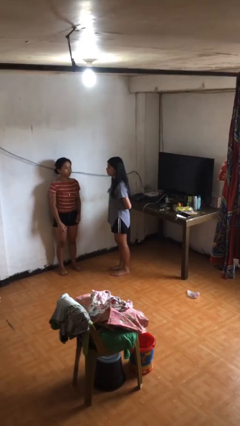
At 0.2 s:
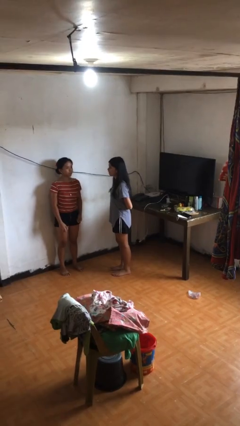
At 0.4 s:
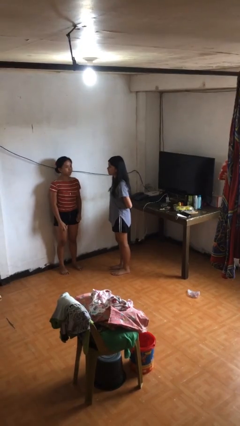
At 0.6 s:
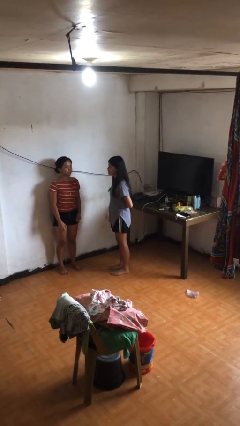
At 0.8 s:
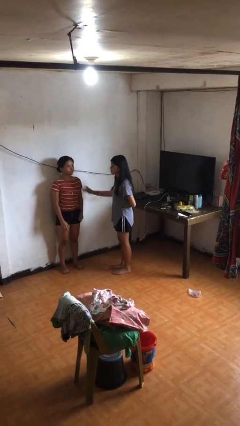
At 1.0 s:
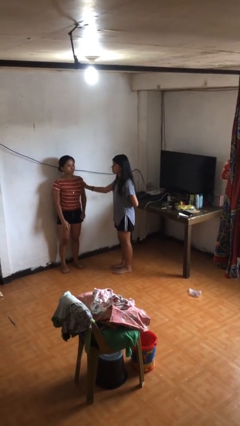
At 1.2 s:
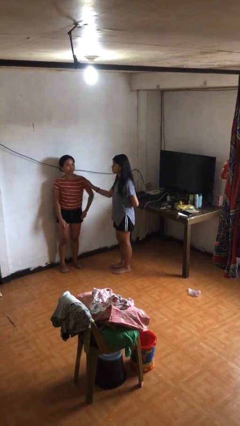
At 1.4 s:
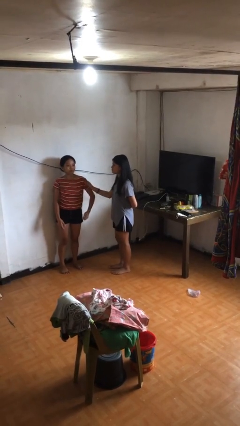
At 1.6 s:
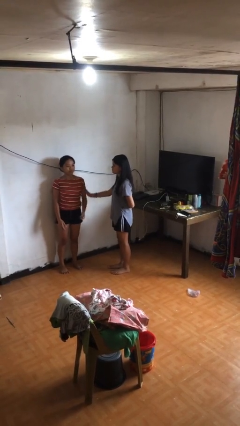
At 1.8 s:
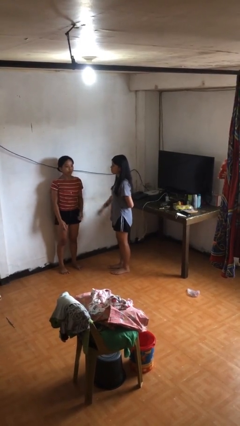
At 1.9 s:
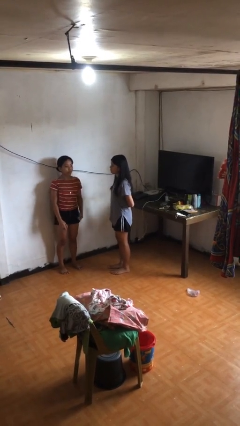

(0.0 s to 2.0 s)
person grabs person by bicep

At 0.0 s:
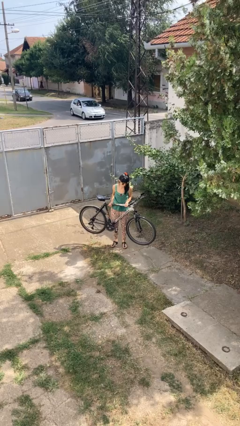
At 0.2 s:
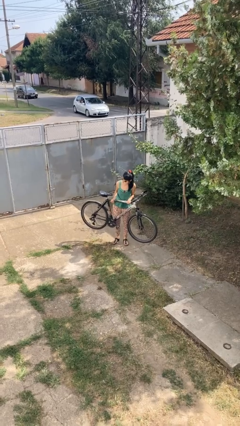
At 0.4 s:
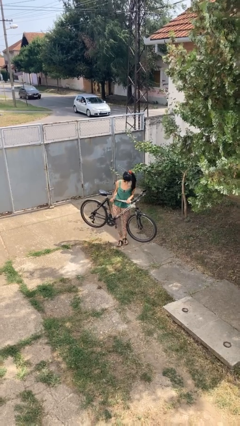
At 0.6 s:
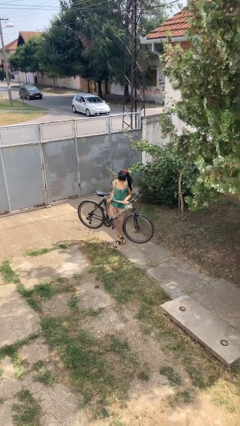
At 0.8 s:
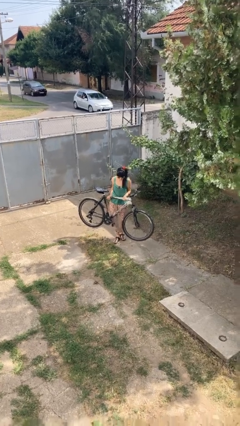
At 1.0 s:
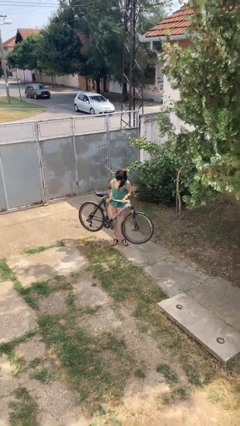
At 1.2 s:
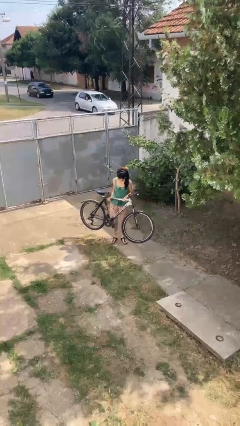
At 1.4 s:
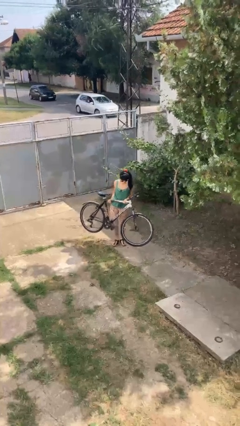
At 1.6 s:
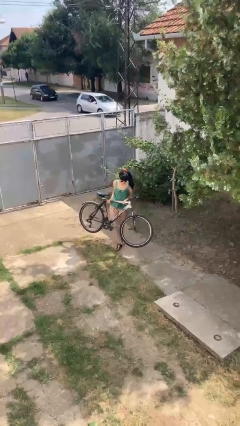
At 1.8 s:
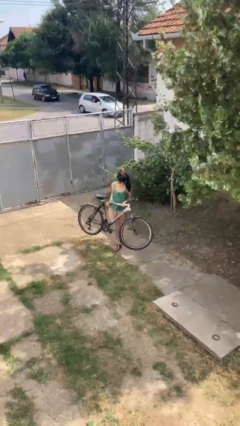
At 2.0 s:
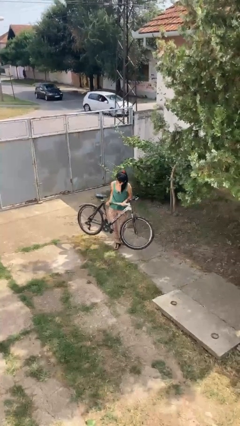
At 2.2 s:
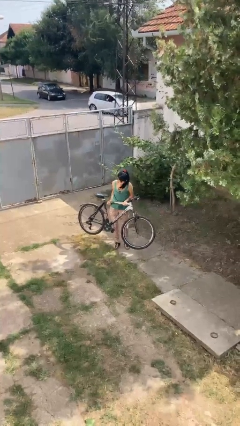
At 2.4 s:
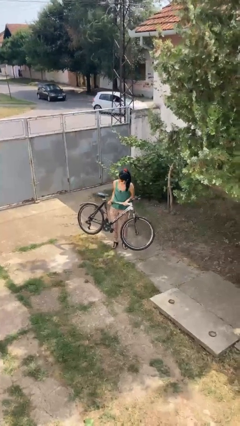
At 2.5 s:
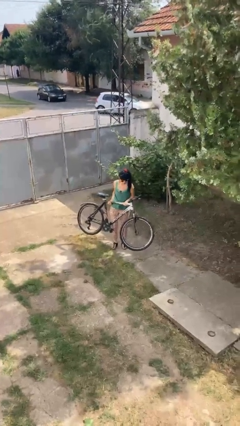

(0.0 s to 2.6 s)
person carries bicycle

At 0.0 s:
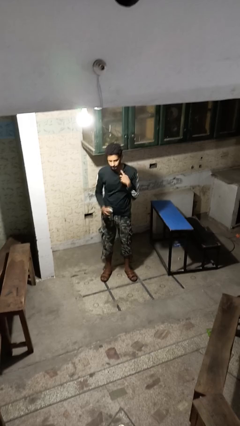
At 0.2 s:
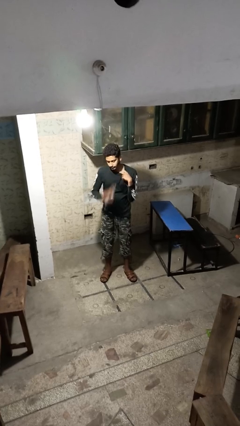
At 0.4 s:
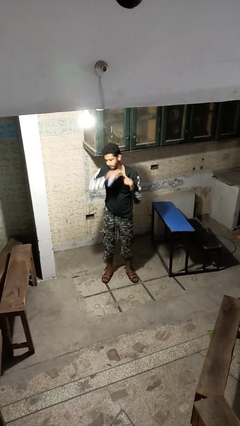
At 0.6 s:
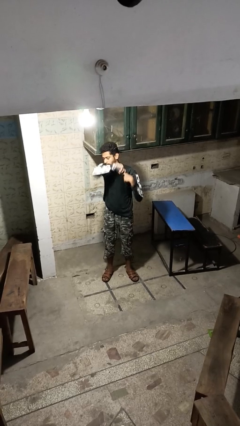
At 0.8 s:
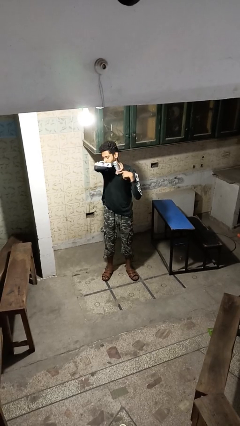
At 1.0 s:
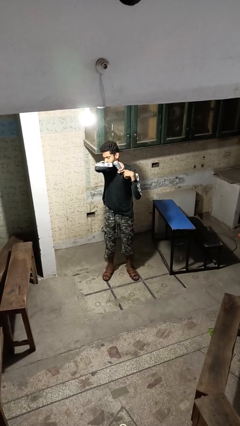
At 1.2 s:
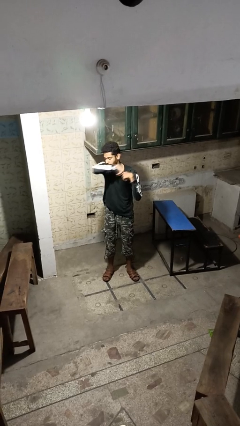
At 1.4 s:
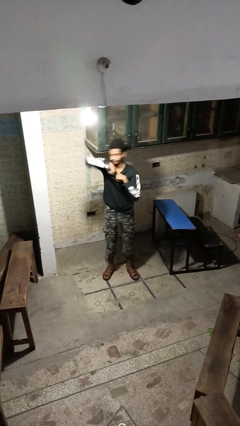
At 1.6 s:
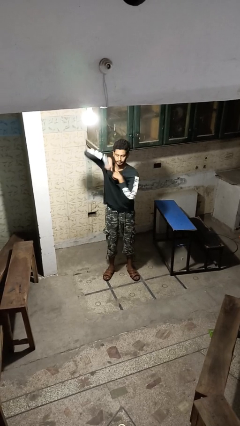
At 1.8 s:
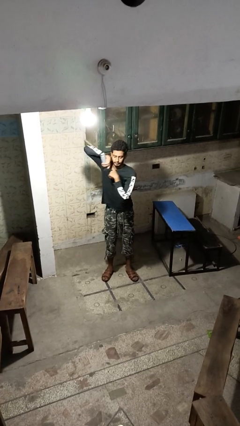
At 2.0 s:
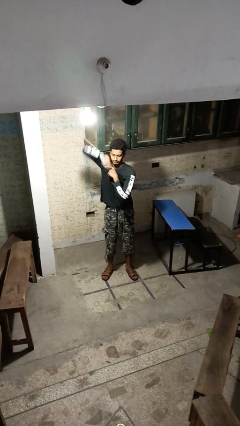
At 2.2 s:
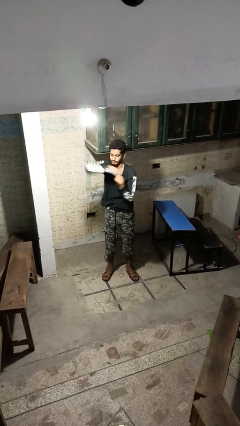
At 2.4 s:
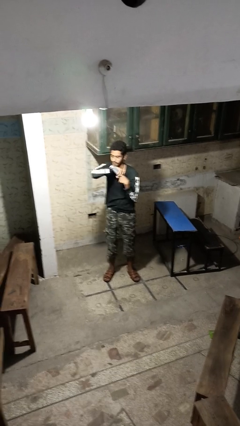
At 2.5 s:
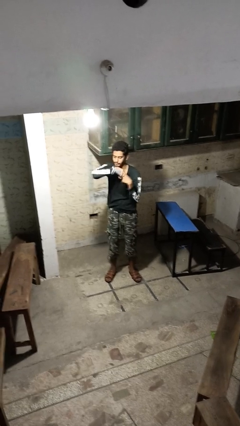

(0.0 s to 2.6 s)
person applies deodorant

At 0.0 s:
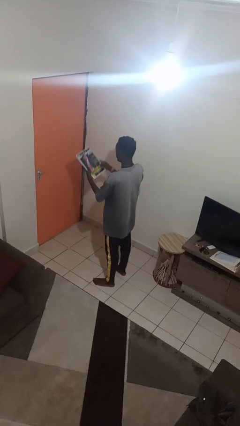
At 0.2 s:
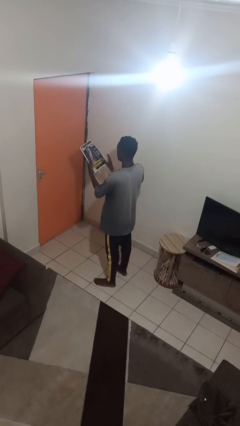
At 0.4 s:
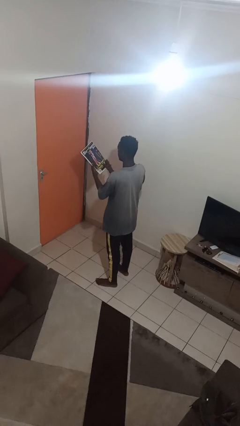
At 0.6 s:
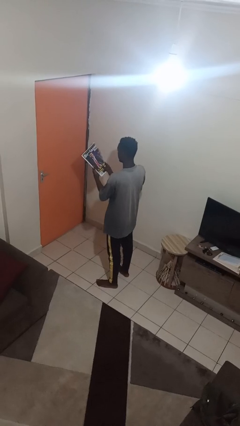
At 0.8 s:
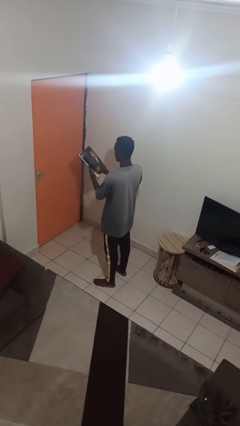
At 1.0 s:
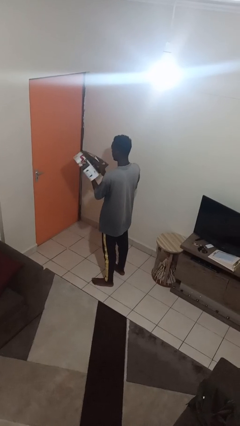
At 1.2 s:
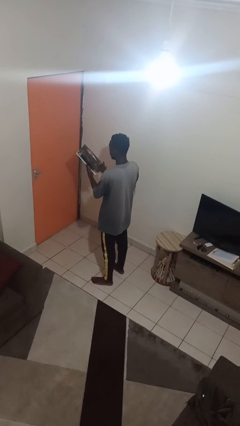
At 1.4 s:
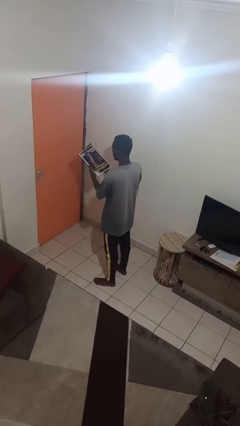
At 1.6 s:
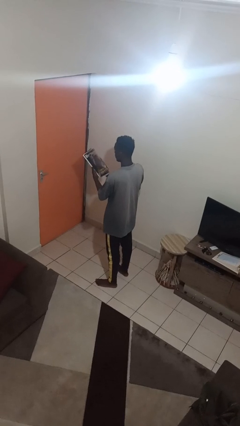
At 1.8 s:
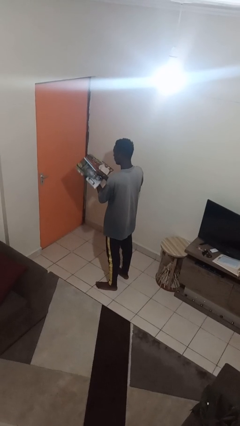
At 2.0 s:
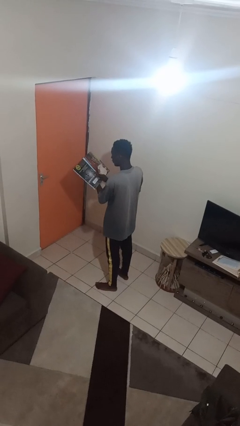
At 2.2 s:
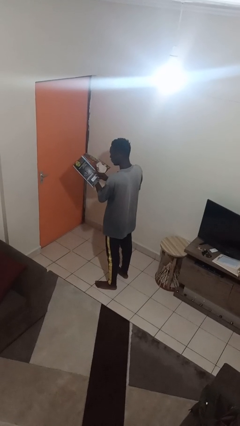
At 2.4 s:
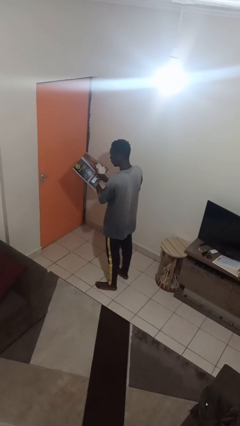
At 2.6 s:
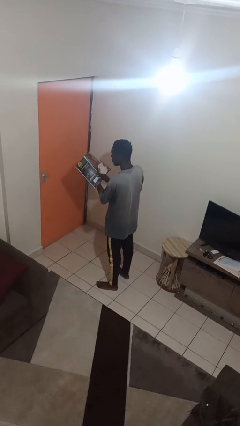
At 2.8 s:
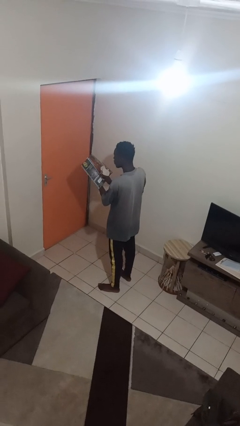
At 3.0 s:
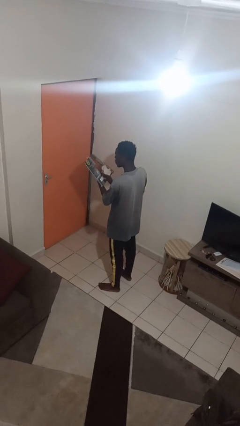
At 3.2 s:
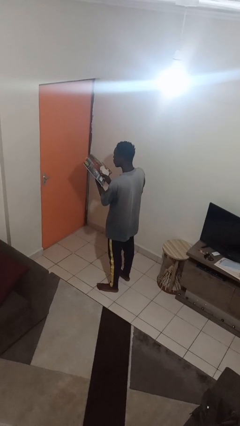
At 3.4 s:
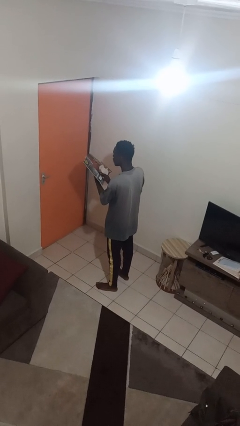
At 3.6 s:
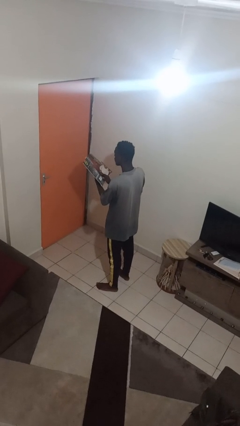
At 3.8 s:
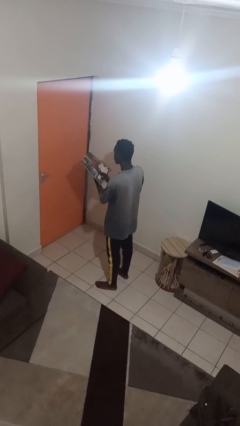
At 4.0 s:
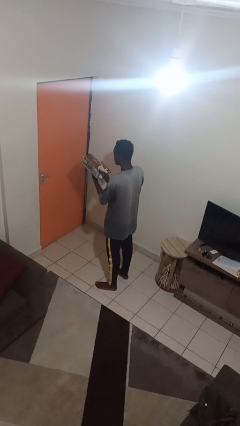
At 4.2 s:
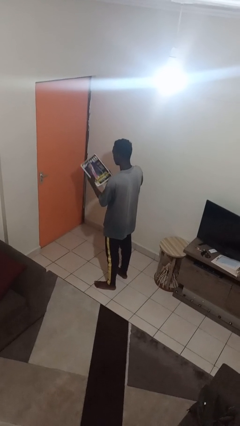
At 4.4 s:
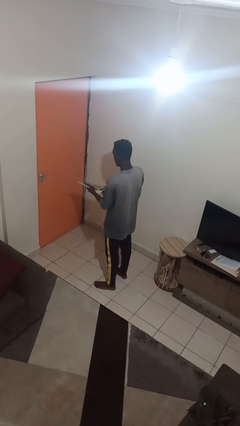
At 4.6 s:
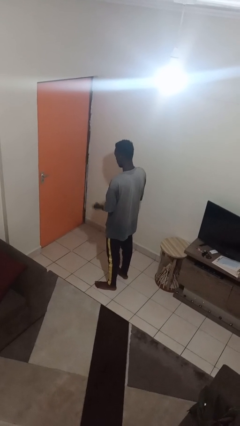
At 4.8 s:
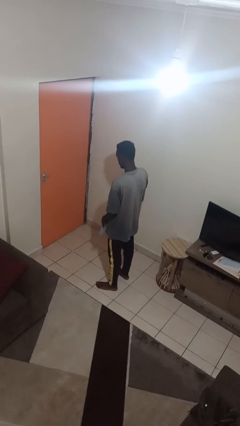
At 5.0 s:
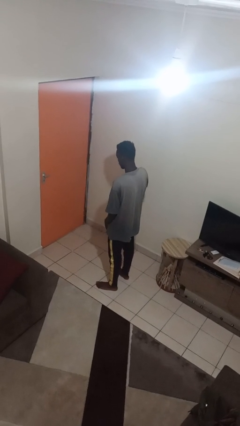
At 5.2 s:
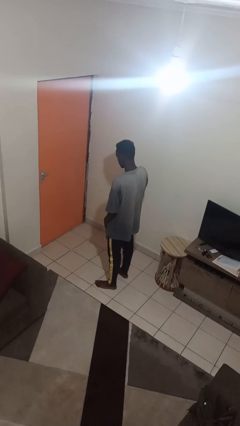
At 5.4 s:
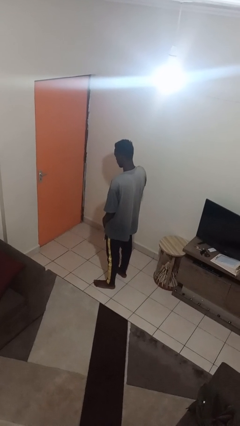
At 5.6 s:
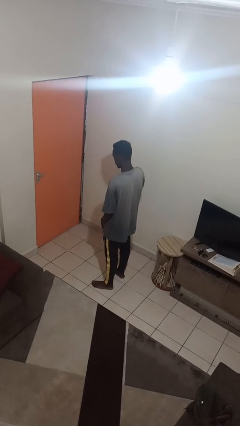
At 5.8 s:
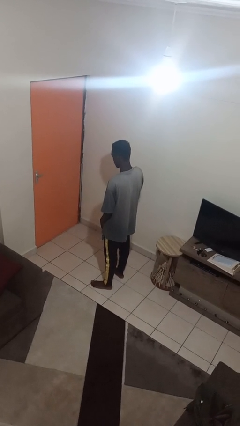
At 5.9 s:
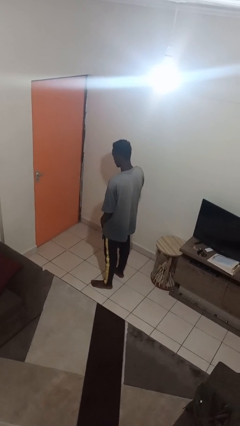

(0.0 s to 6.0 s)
person reads magazine

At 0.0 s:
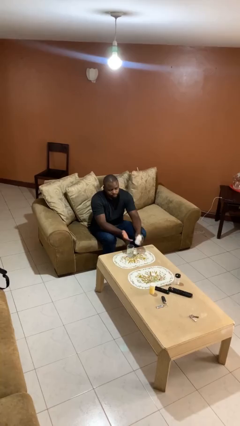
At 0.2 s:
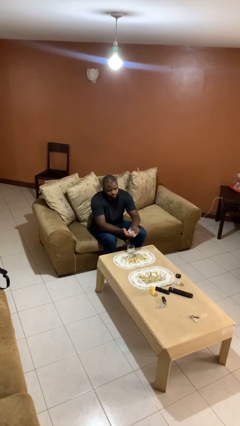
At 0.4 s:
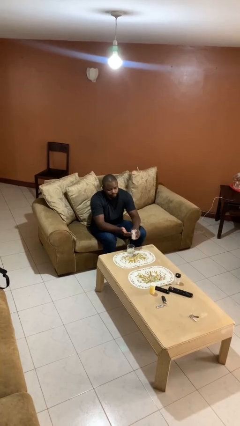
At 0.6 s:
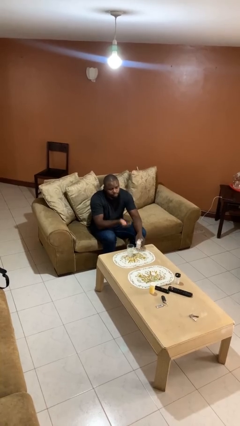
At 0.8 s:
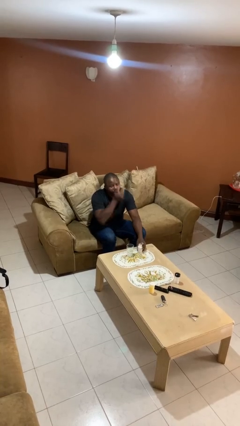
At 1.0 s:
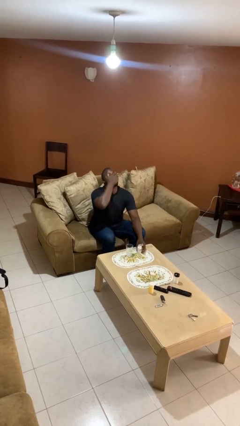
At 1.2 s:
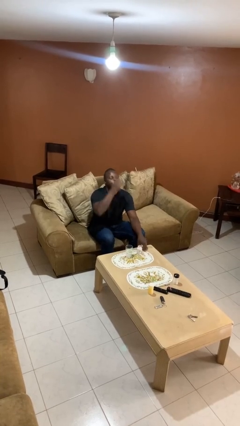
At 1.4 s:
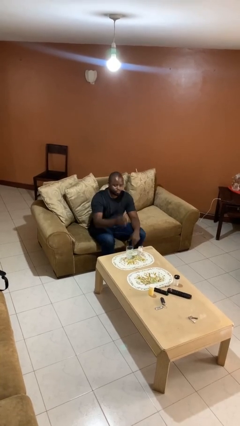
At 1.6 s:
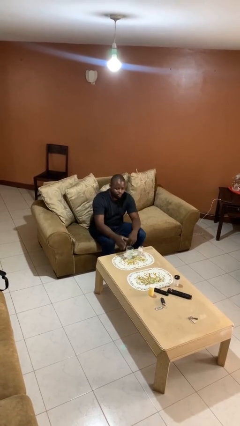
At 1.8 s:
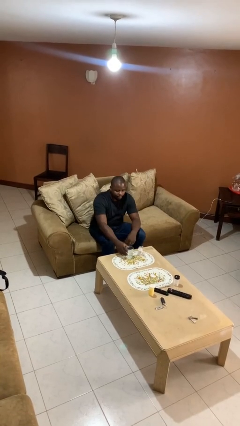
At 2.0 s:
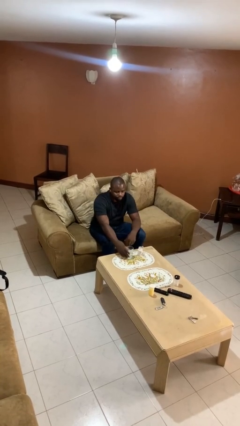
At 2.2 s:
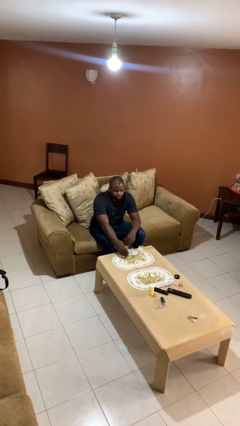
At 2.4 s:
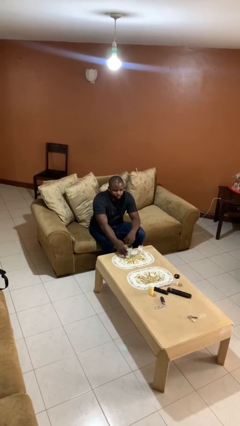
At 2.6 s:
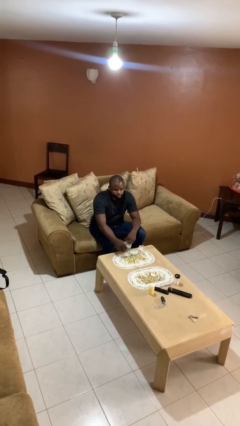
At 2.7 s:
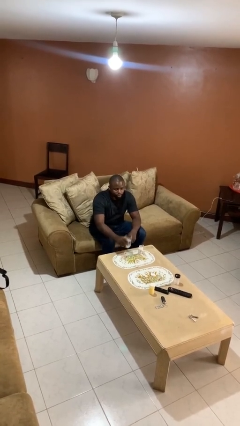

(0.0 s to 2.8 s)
person takes medicine pills

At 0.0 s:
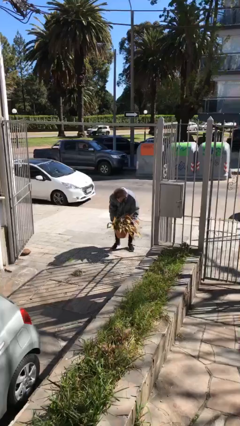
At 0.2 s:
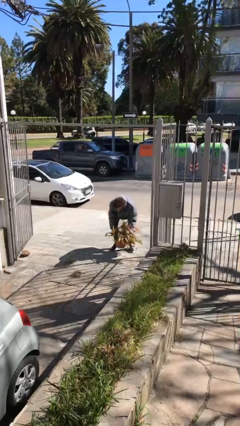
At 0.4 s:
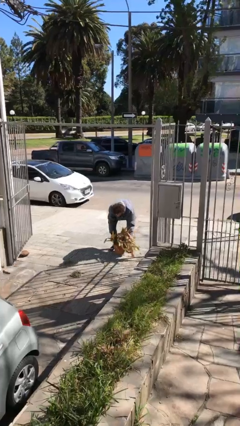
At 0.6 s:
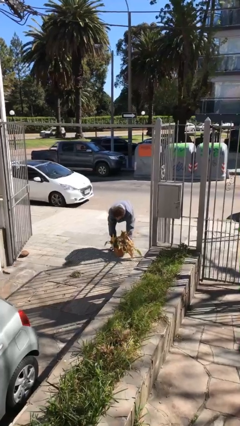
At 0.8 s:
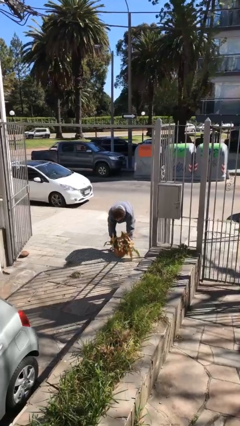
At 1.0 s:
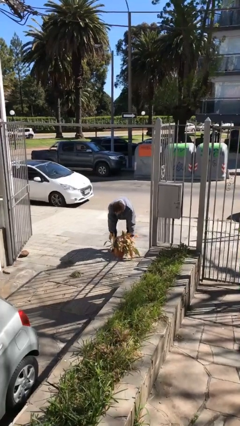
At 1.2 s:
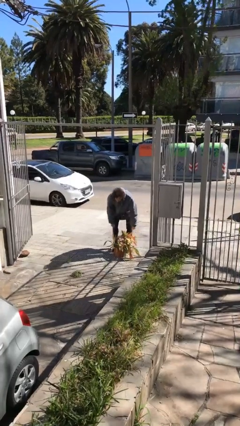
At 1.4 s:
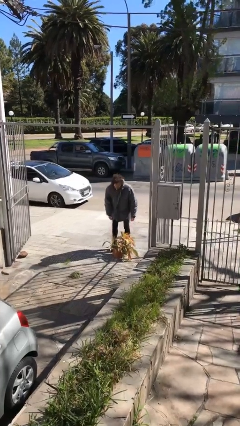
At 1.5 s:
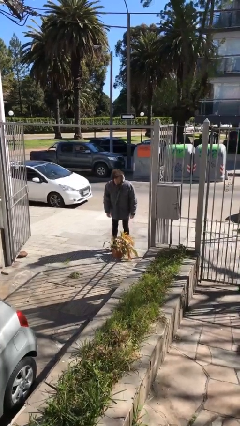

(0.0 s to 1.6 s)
person puts down object on floor
